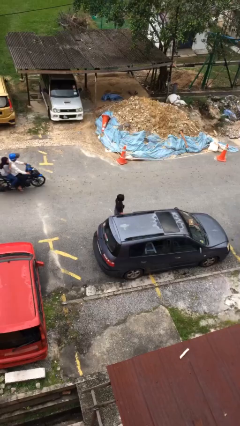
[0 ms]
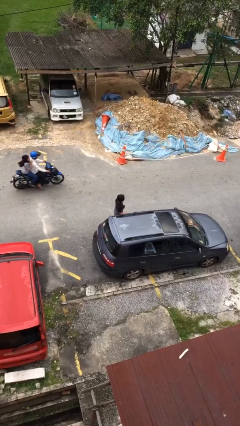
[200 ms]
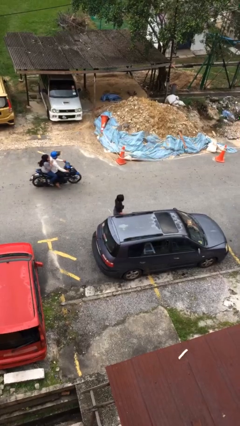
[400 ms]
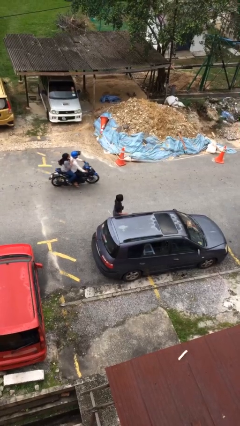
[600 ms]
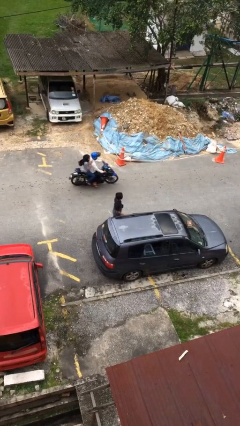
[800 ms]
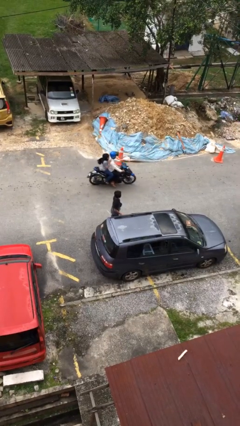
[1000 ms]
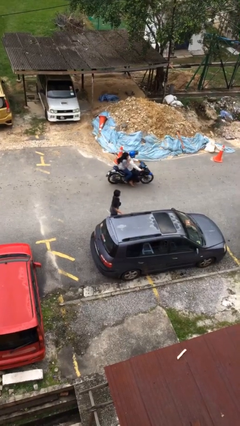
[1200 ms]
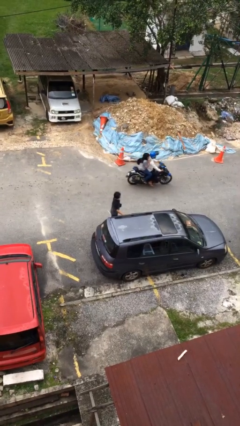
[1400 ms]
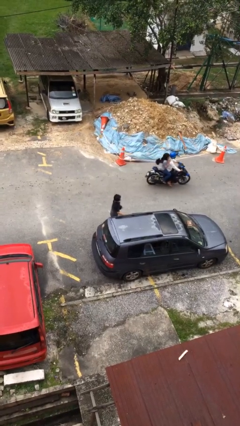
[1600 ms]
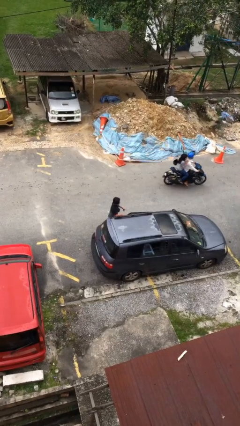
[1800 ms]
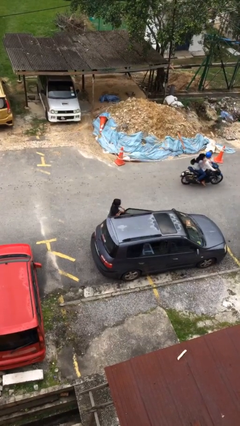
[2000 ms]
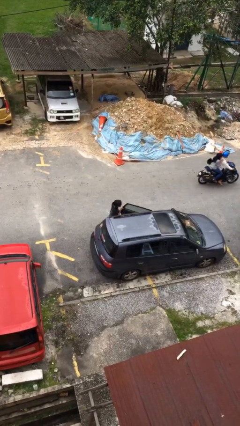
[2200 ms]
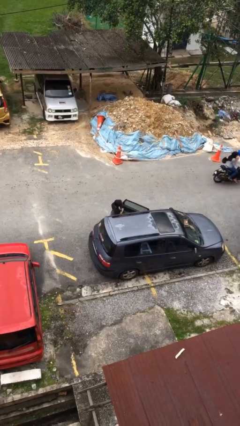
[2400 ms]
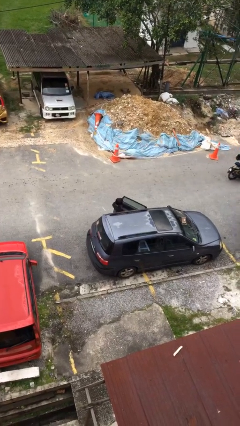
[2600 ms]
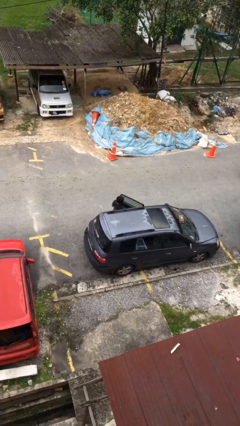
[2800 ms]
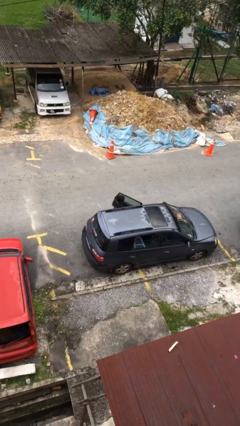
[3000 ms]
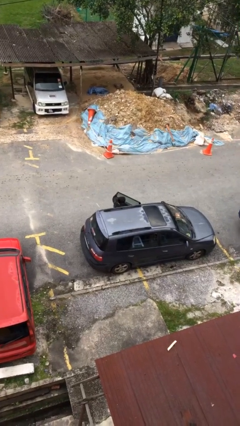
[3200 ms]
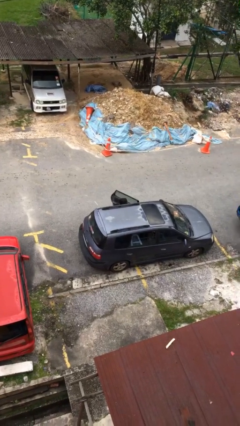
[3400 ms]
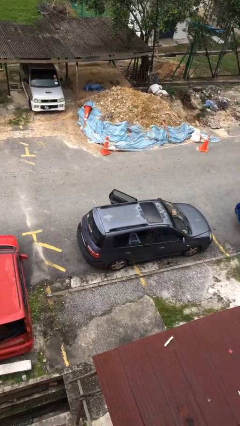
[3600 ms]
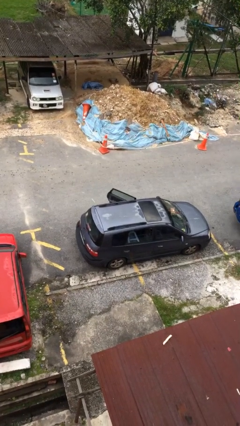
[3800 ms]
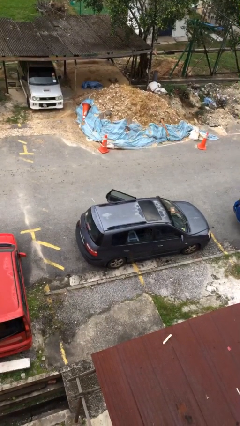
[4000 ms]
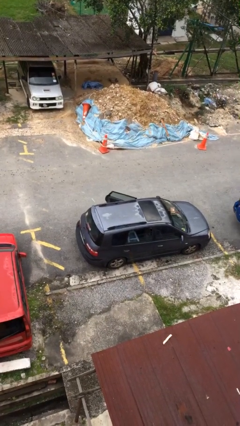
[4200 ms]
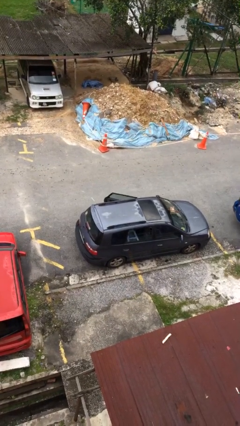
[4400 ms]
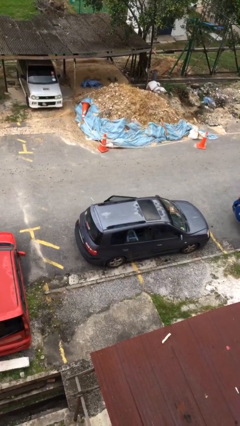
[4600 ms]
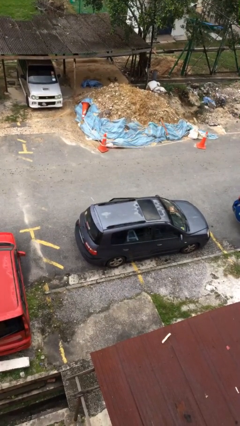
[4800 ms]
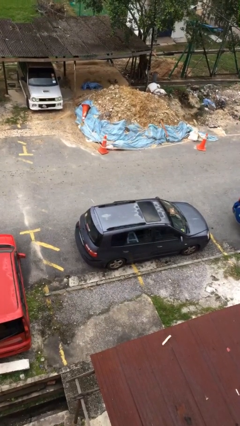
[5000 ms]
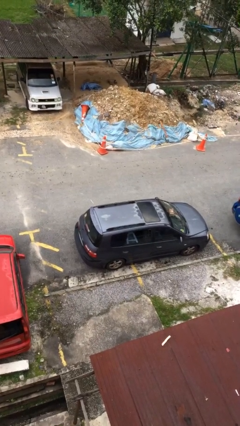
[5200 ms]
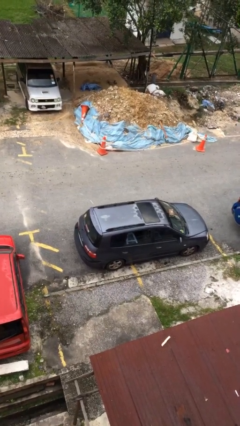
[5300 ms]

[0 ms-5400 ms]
person enters car

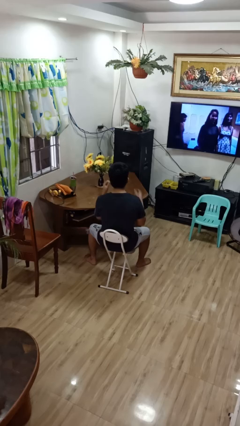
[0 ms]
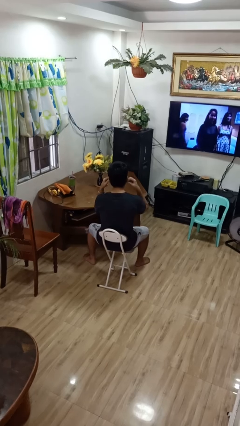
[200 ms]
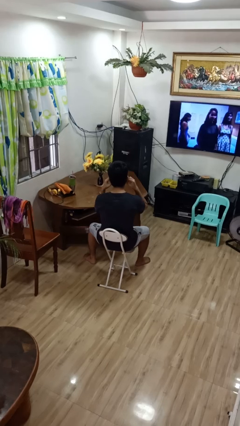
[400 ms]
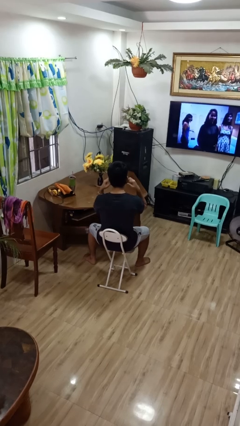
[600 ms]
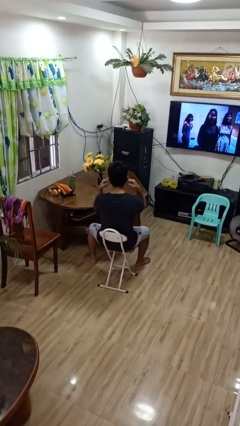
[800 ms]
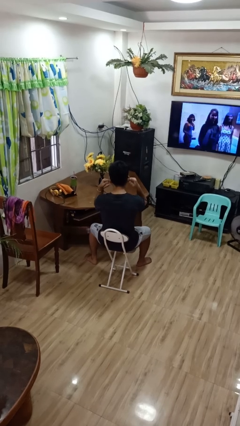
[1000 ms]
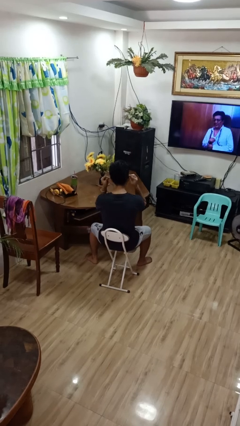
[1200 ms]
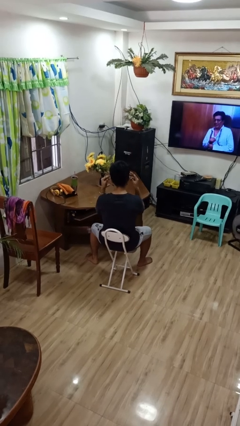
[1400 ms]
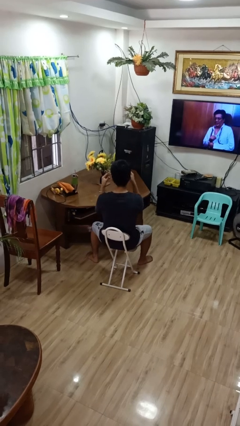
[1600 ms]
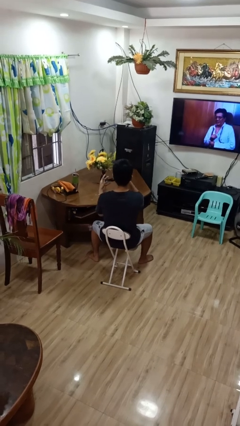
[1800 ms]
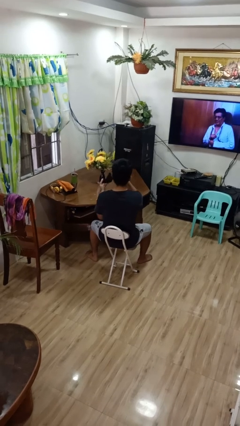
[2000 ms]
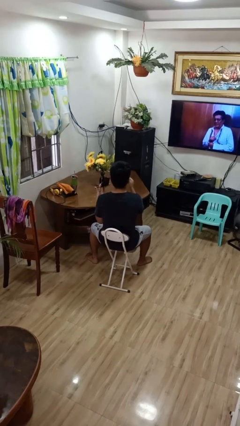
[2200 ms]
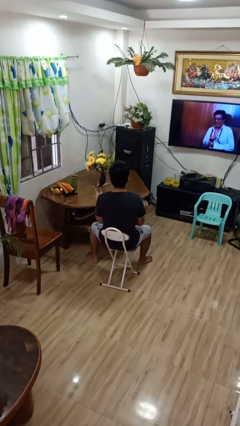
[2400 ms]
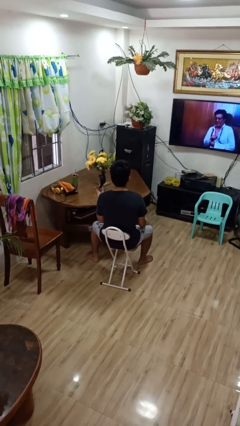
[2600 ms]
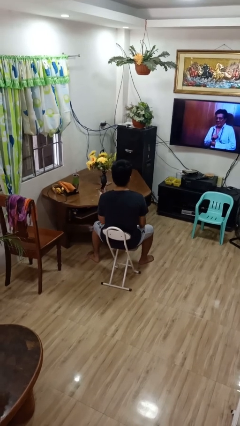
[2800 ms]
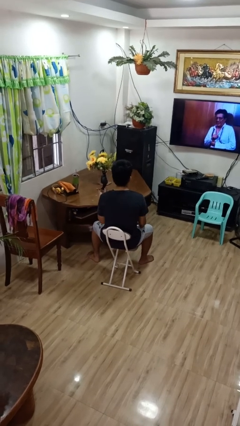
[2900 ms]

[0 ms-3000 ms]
person takes off facemask

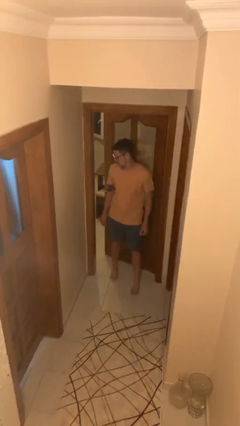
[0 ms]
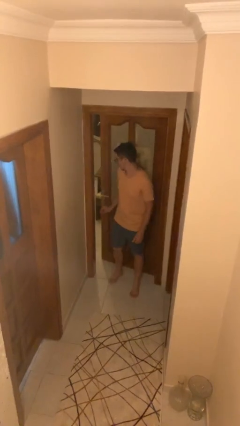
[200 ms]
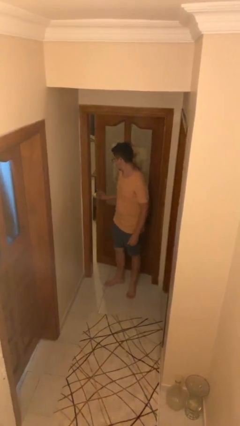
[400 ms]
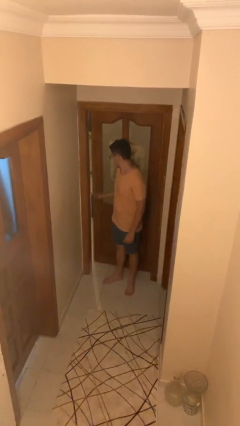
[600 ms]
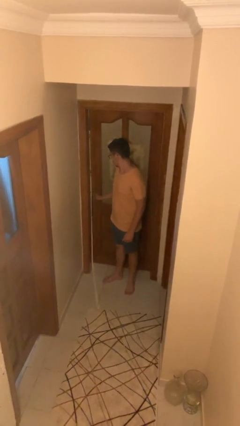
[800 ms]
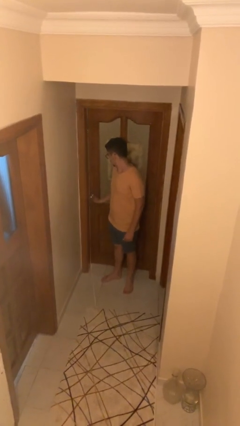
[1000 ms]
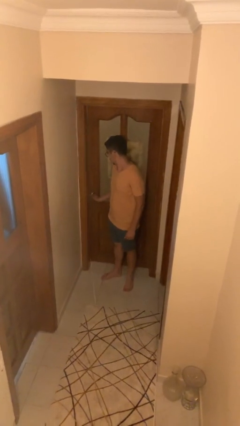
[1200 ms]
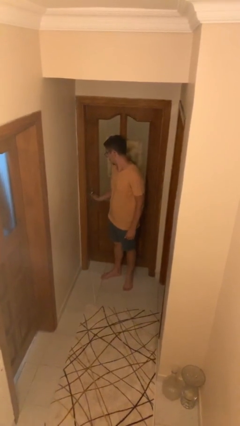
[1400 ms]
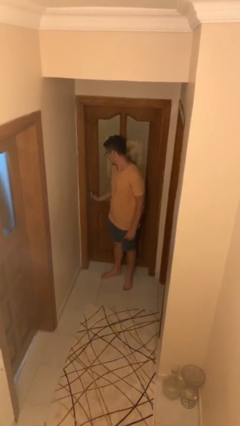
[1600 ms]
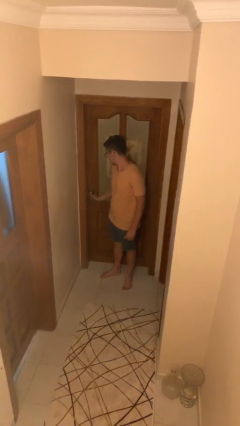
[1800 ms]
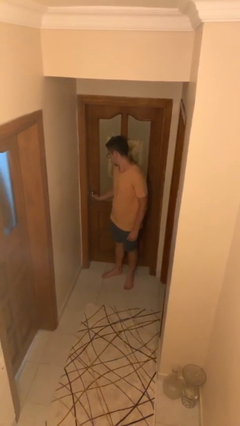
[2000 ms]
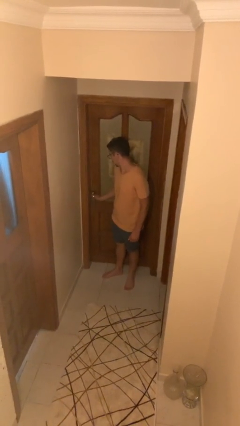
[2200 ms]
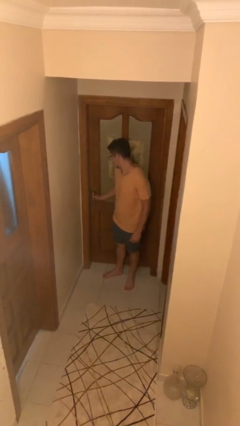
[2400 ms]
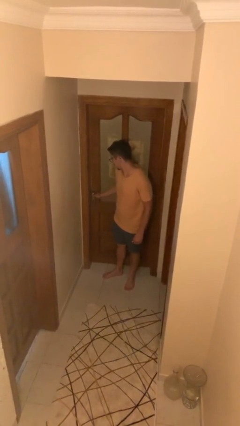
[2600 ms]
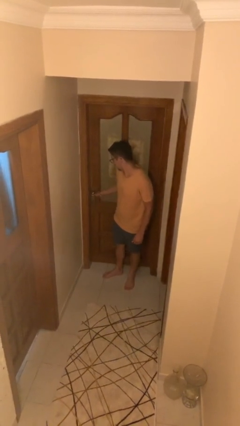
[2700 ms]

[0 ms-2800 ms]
person closes facility door

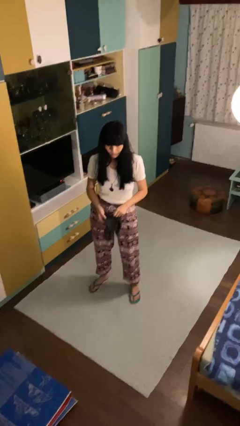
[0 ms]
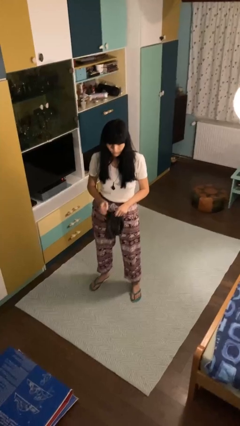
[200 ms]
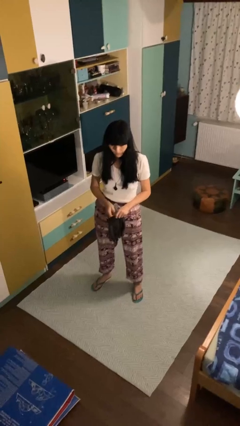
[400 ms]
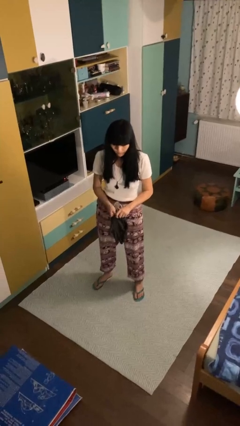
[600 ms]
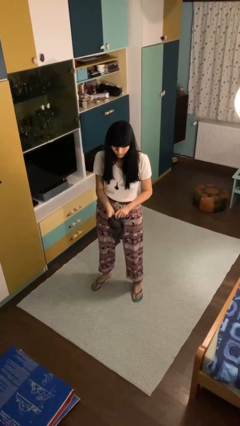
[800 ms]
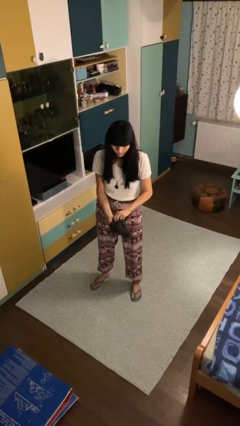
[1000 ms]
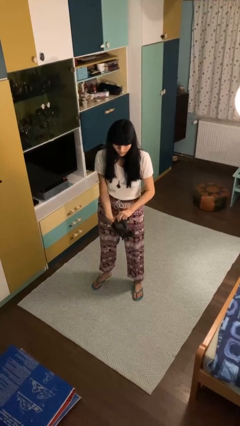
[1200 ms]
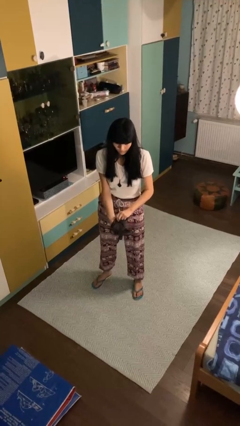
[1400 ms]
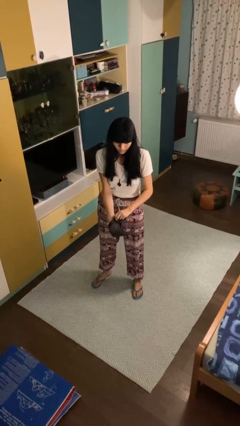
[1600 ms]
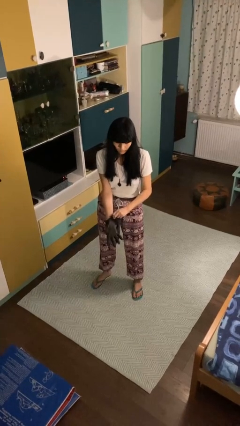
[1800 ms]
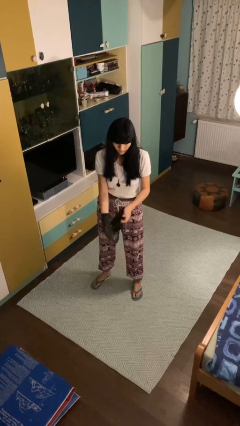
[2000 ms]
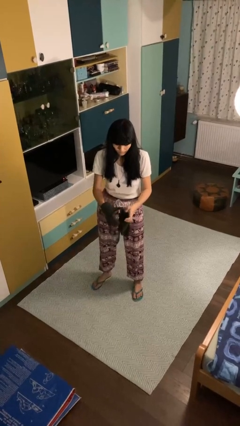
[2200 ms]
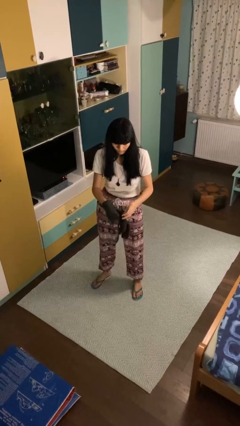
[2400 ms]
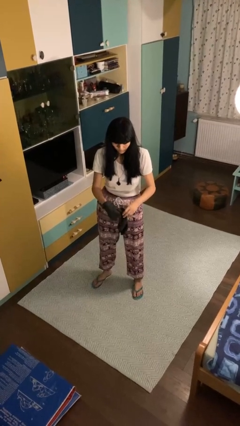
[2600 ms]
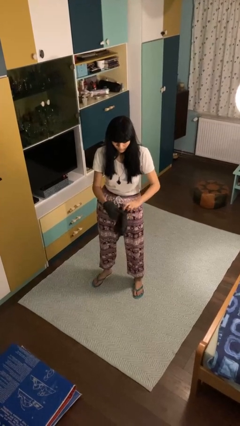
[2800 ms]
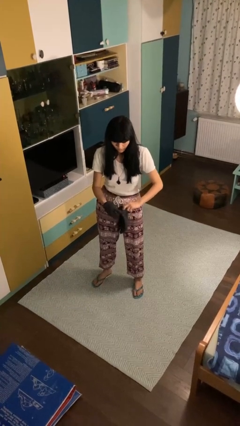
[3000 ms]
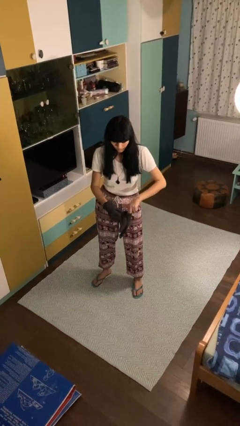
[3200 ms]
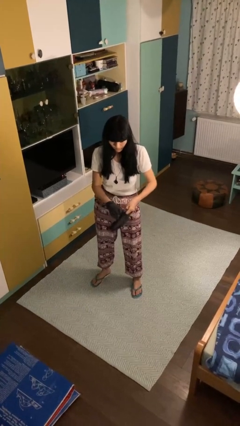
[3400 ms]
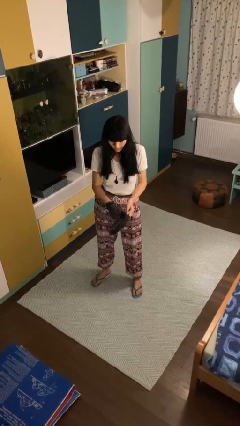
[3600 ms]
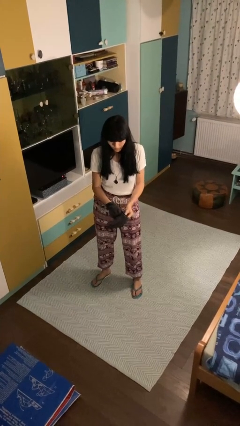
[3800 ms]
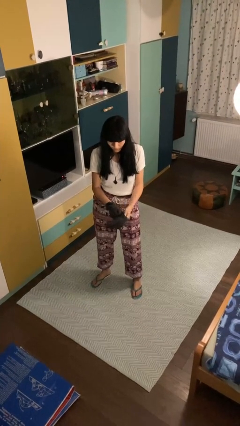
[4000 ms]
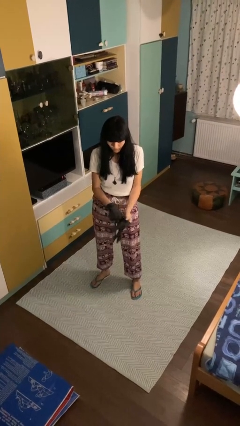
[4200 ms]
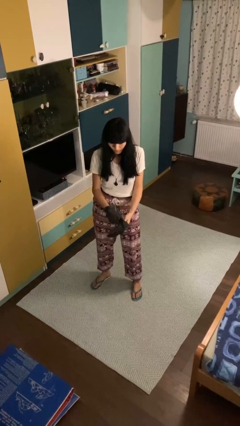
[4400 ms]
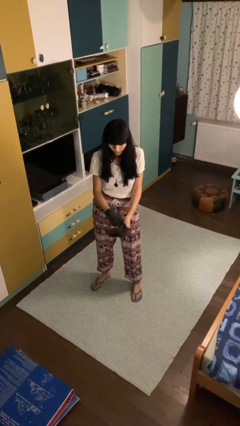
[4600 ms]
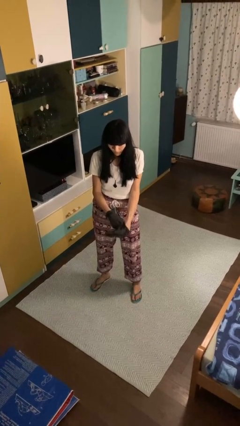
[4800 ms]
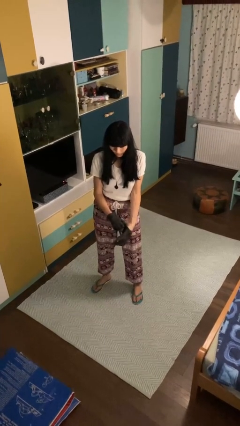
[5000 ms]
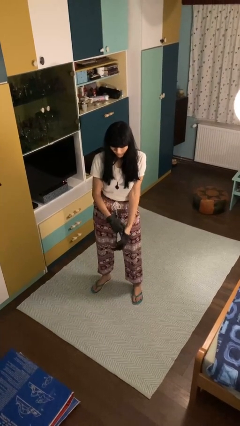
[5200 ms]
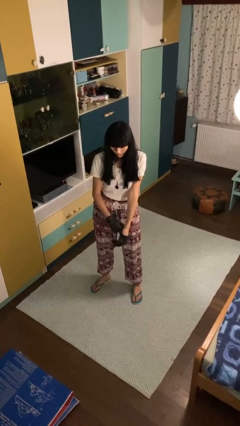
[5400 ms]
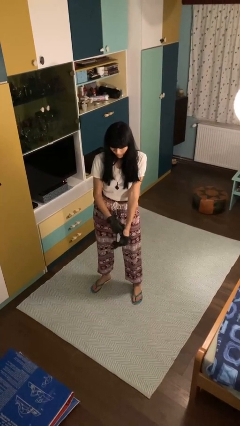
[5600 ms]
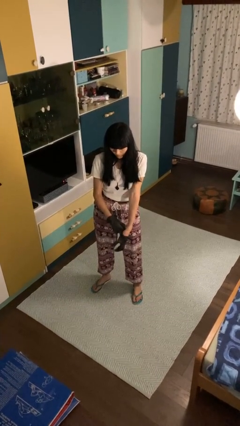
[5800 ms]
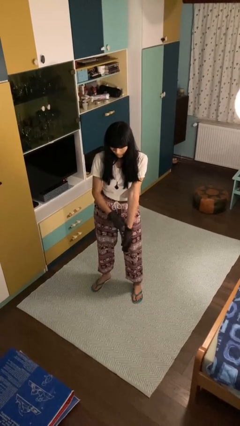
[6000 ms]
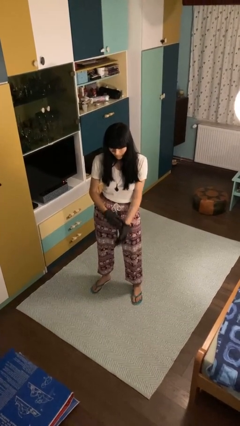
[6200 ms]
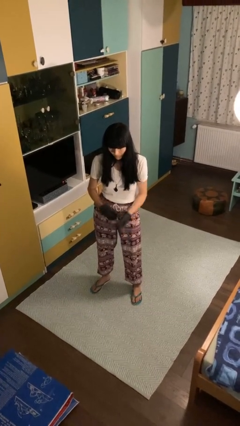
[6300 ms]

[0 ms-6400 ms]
person puts on gloves
